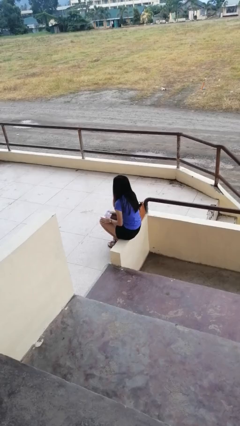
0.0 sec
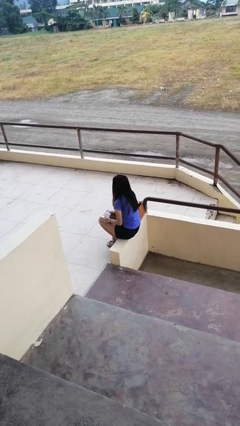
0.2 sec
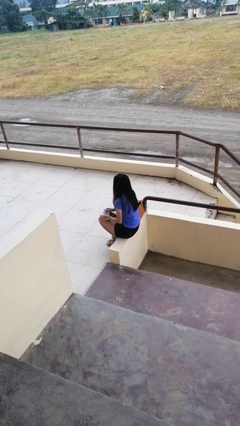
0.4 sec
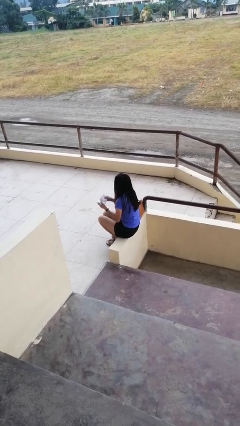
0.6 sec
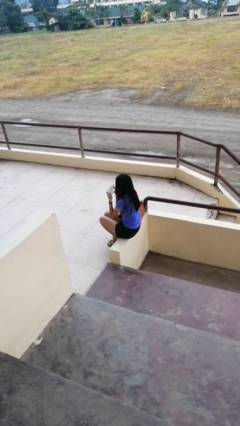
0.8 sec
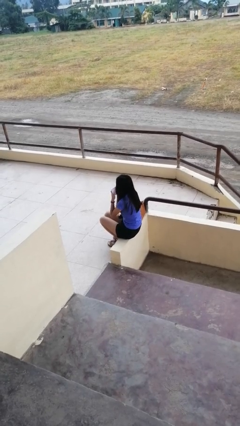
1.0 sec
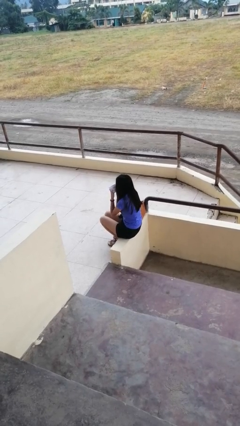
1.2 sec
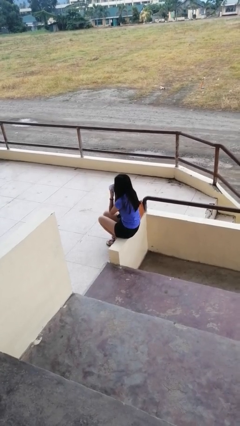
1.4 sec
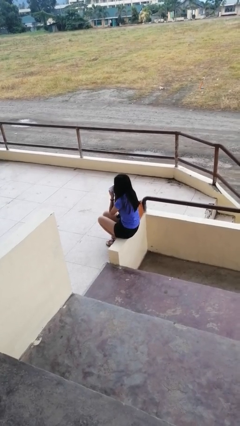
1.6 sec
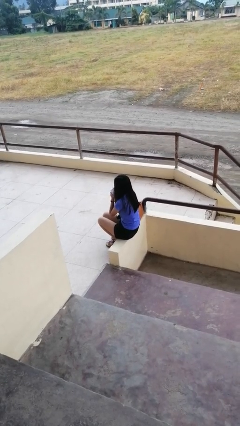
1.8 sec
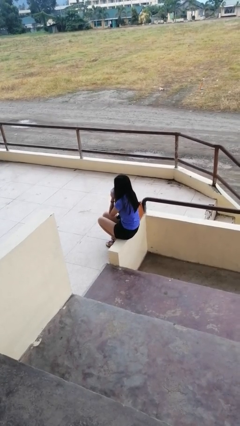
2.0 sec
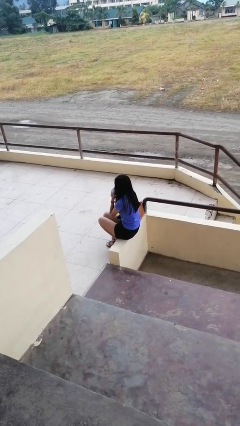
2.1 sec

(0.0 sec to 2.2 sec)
person wipes mouth with napkin

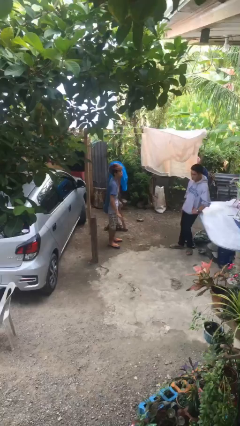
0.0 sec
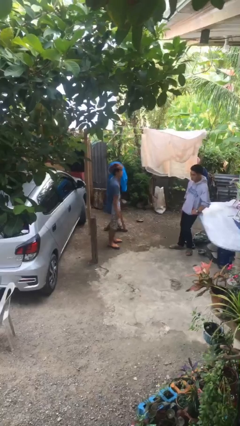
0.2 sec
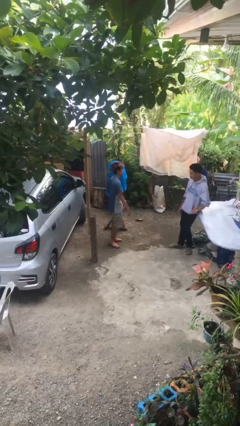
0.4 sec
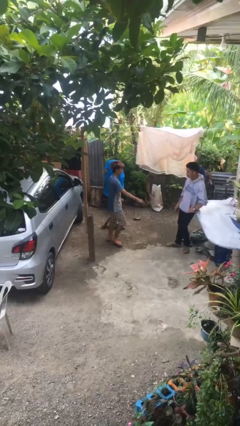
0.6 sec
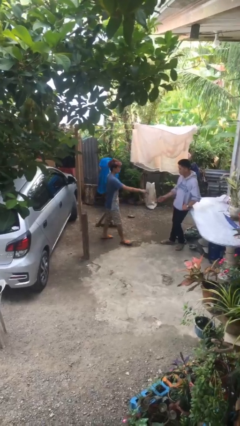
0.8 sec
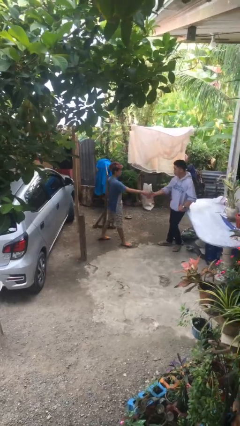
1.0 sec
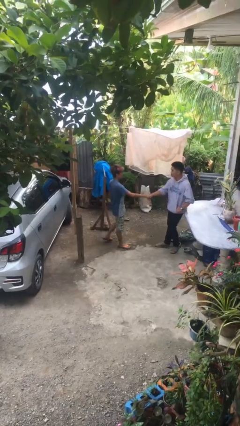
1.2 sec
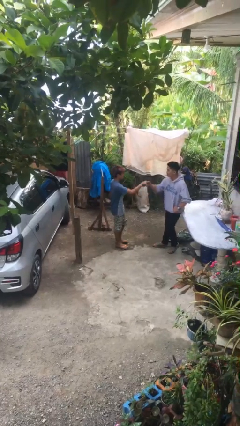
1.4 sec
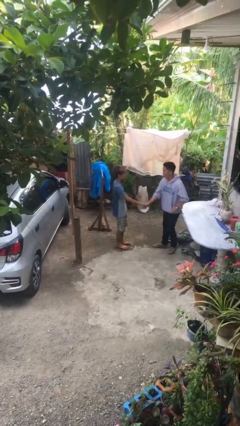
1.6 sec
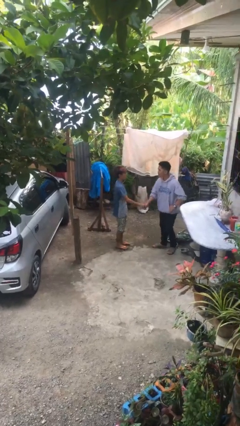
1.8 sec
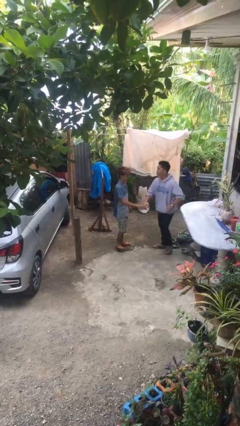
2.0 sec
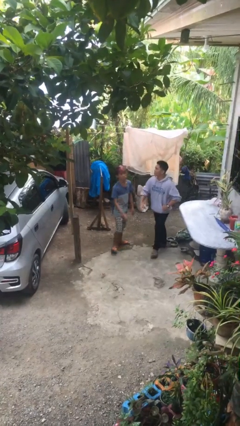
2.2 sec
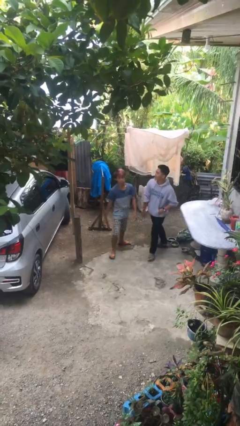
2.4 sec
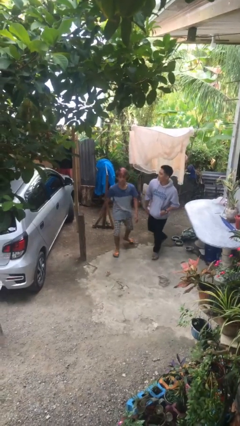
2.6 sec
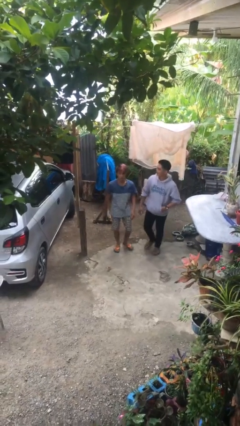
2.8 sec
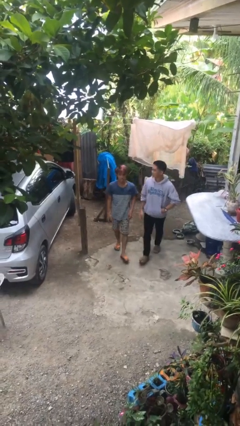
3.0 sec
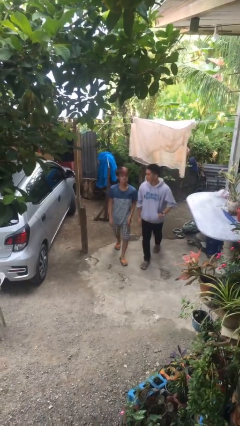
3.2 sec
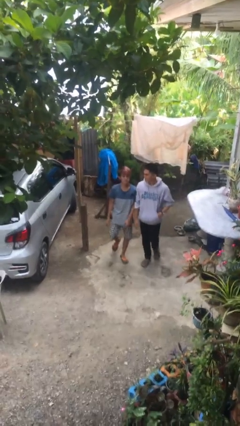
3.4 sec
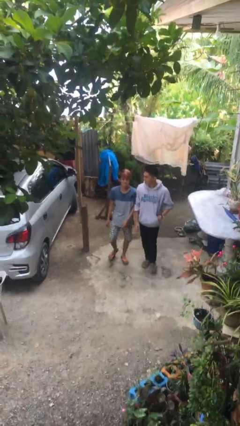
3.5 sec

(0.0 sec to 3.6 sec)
person shakes hand

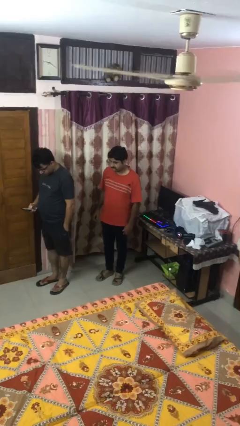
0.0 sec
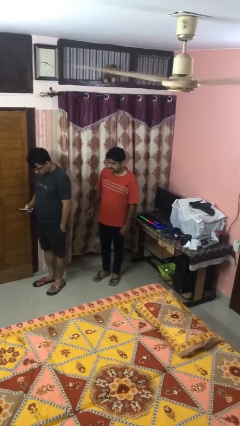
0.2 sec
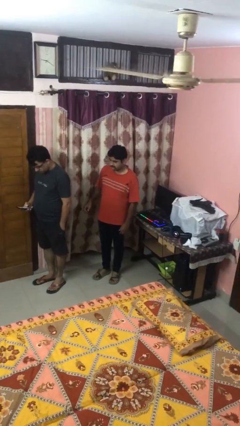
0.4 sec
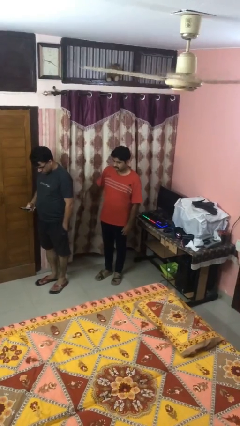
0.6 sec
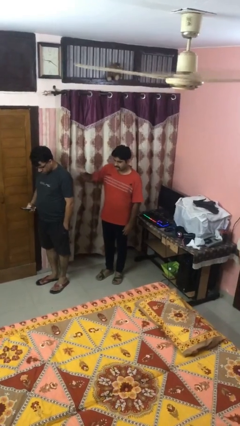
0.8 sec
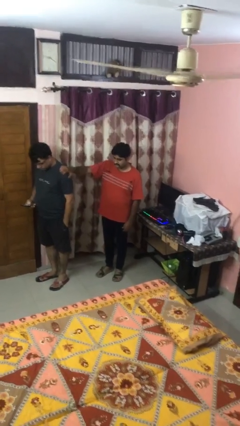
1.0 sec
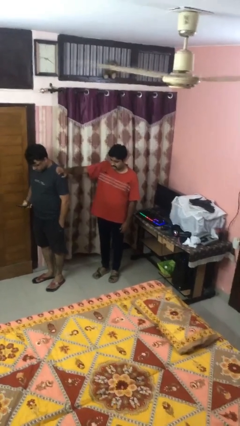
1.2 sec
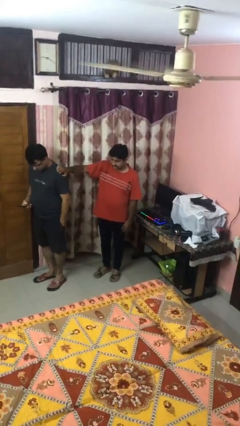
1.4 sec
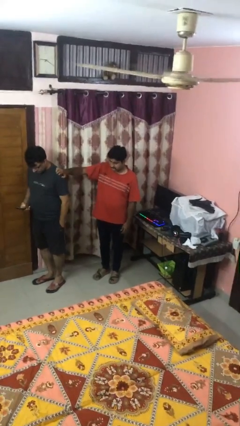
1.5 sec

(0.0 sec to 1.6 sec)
person grabs person by shoulder

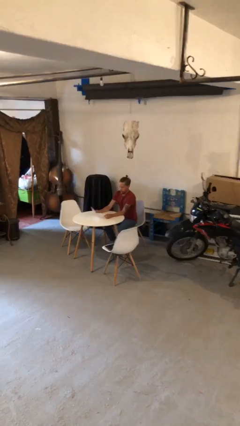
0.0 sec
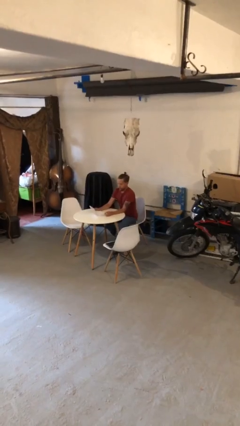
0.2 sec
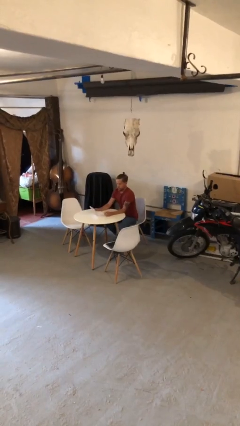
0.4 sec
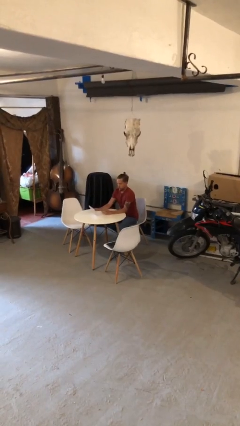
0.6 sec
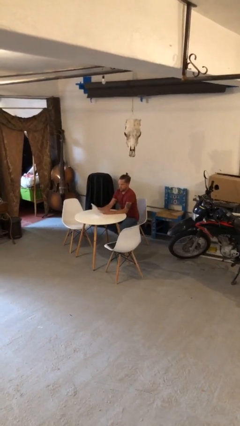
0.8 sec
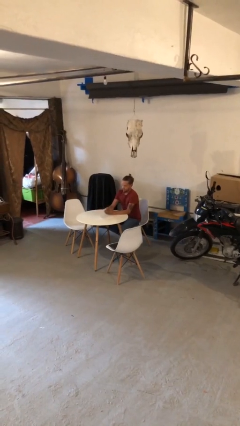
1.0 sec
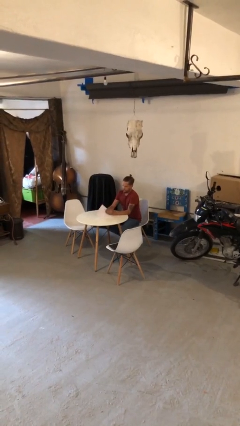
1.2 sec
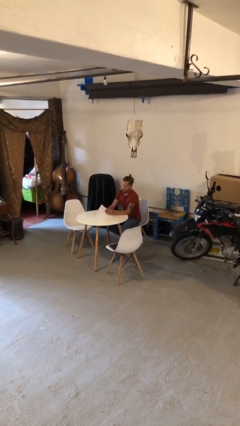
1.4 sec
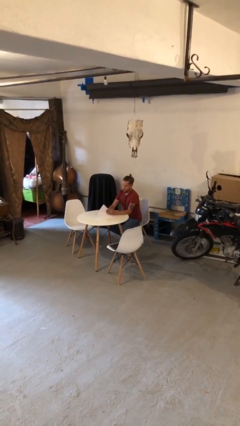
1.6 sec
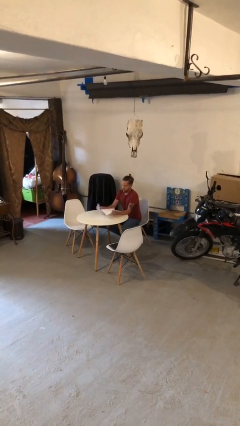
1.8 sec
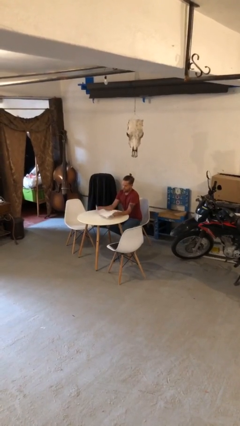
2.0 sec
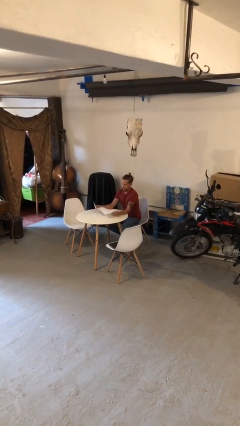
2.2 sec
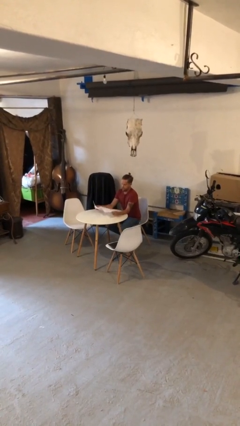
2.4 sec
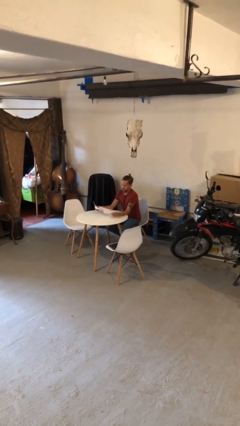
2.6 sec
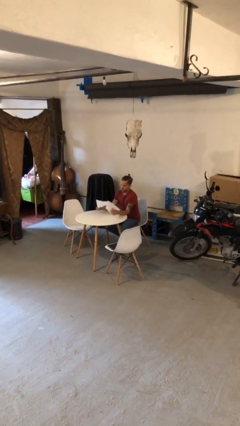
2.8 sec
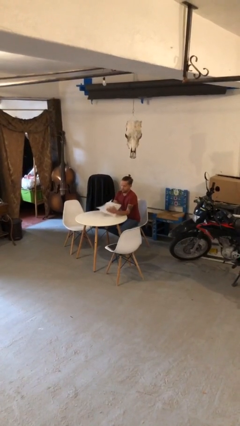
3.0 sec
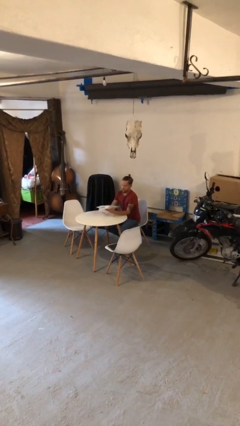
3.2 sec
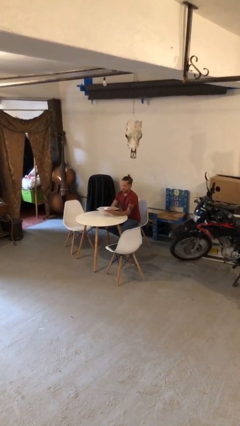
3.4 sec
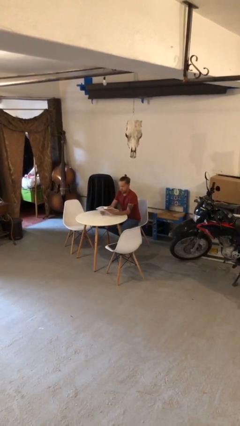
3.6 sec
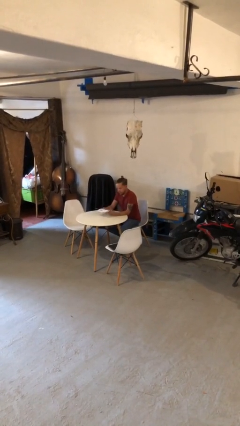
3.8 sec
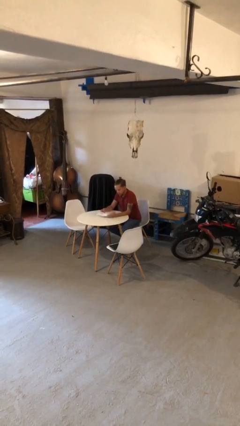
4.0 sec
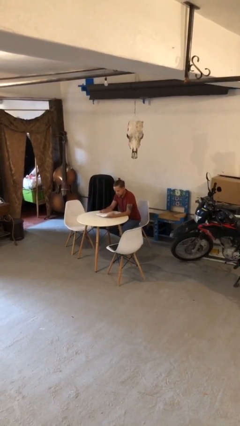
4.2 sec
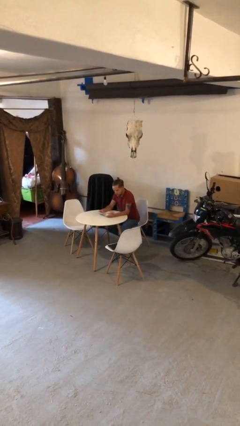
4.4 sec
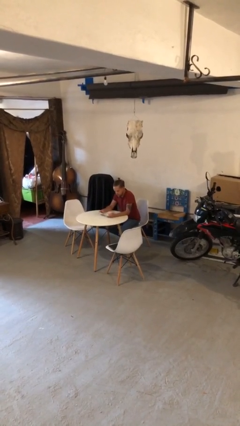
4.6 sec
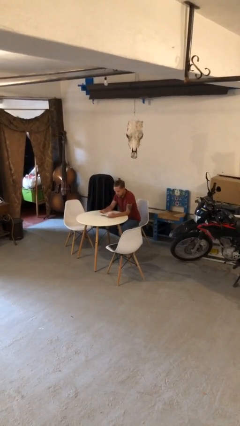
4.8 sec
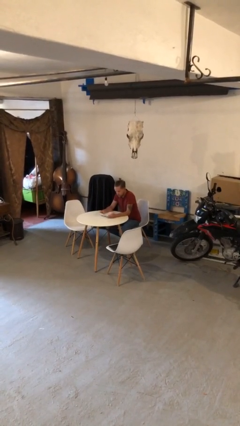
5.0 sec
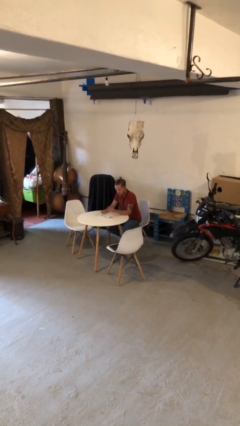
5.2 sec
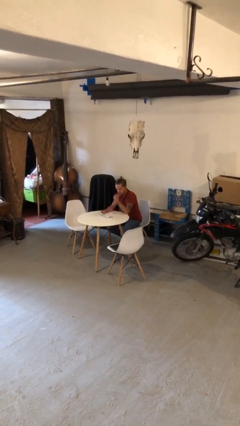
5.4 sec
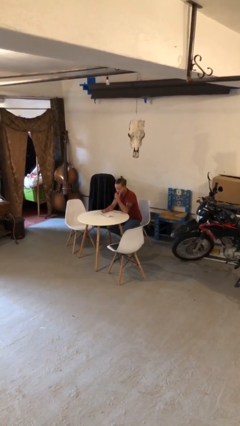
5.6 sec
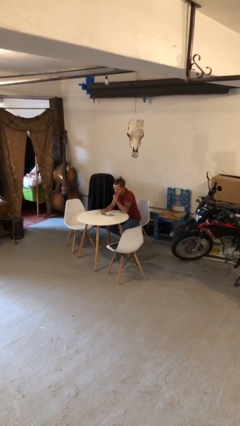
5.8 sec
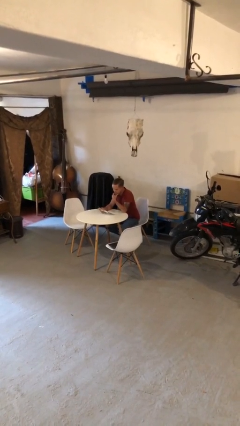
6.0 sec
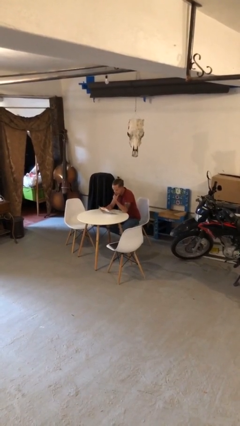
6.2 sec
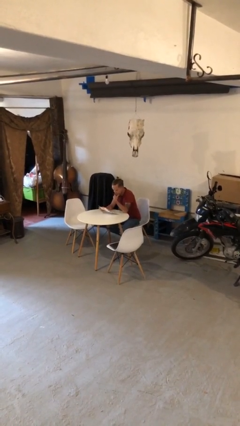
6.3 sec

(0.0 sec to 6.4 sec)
person reads document

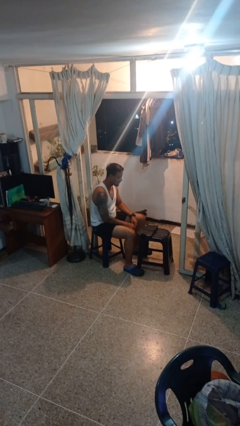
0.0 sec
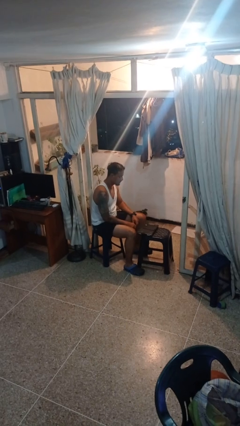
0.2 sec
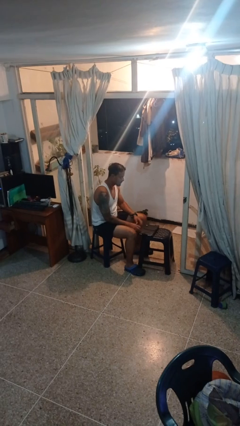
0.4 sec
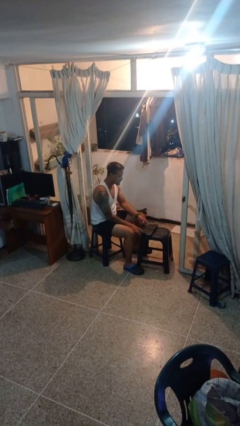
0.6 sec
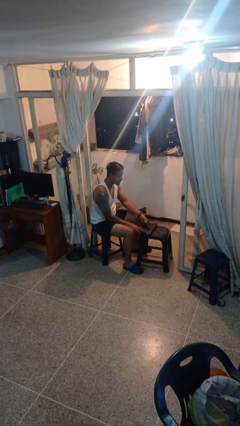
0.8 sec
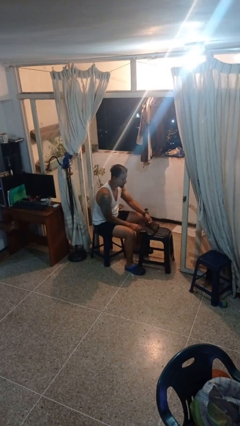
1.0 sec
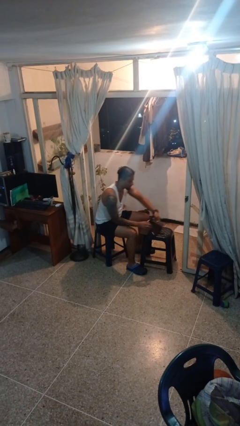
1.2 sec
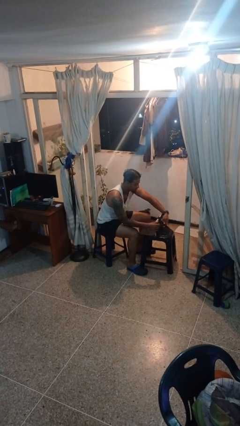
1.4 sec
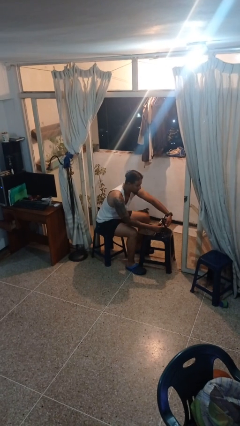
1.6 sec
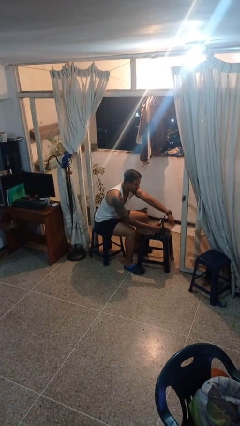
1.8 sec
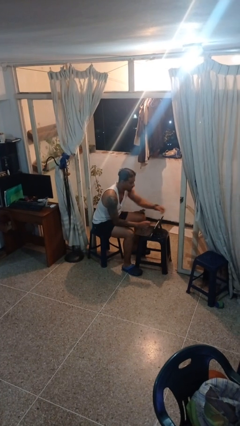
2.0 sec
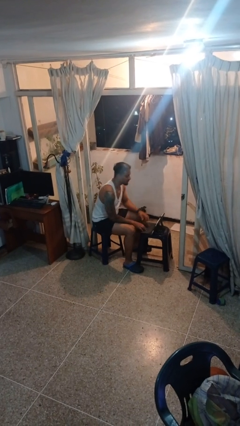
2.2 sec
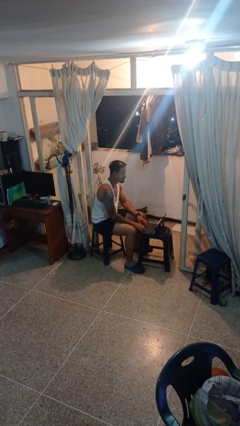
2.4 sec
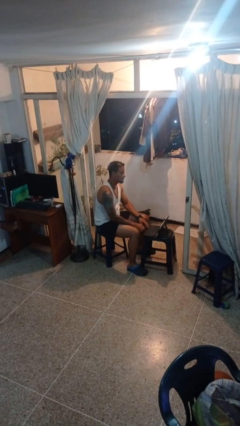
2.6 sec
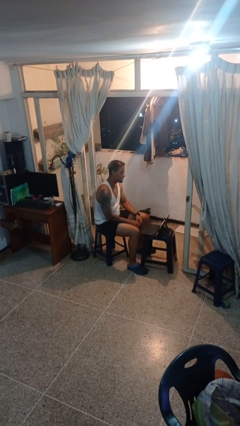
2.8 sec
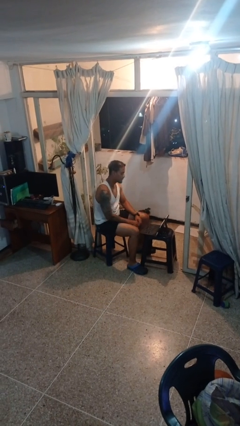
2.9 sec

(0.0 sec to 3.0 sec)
person opens laptop

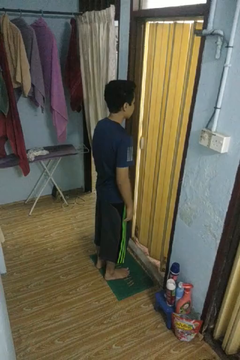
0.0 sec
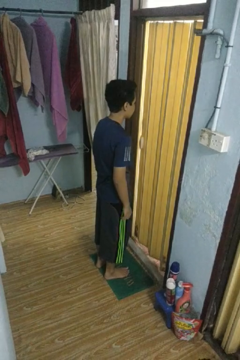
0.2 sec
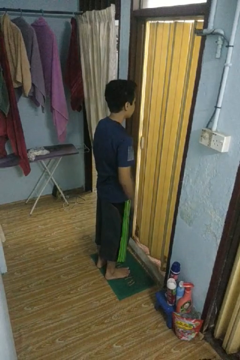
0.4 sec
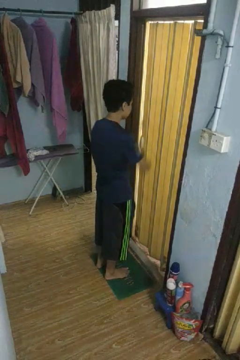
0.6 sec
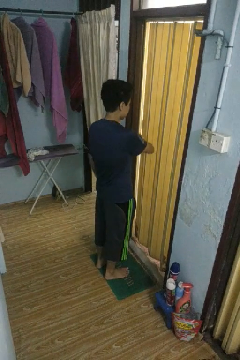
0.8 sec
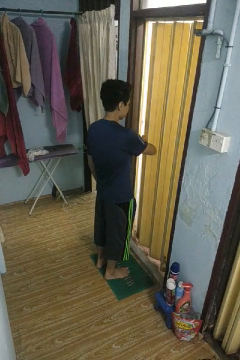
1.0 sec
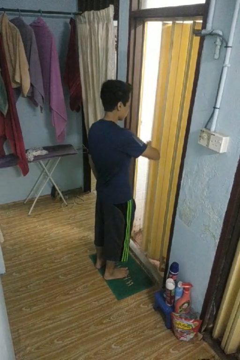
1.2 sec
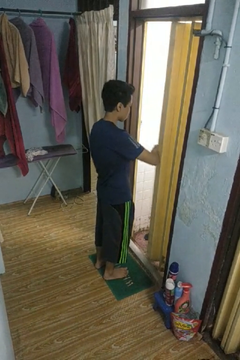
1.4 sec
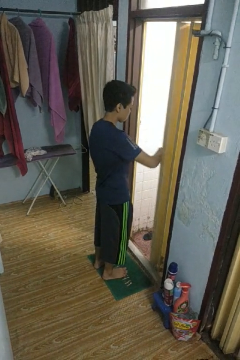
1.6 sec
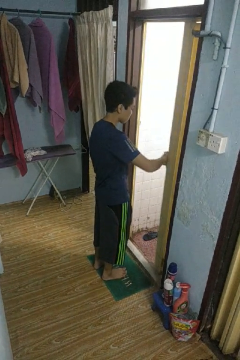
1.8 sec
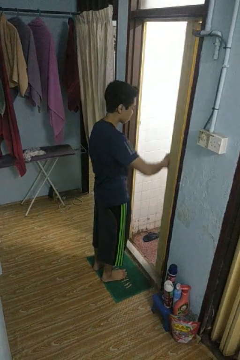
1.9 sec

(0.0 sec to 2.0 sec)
person opens sliding door
